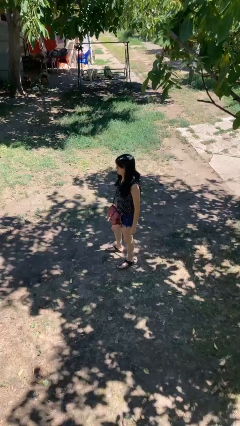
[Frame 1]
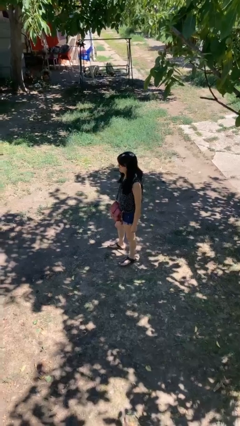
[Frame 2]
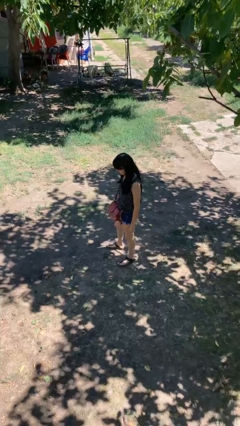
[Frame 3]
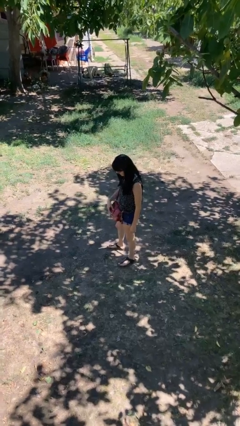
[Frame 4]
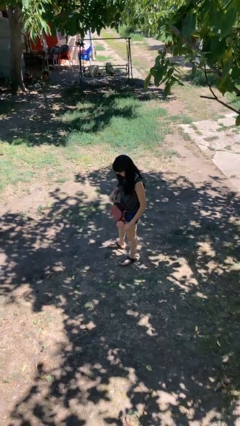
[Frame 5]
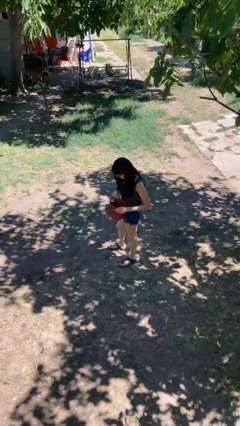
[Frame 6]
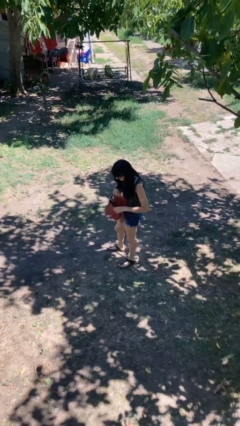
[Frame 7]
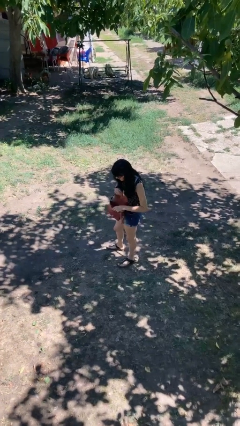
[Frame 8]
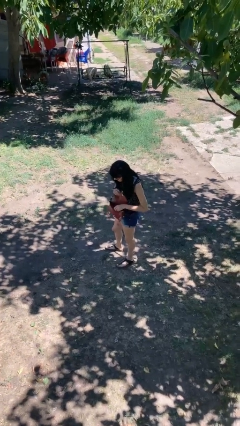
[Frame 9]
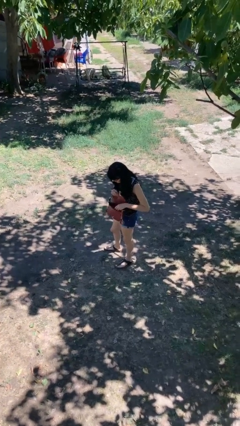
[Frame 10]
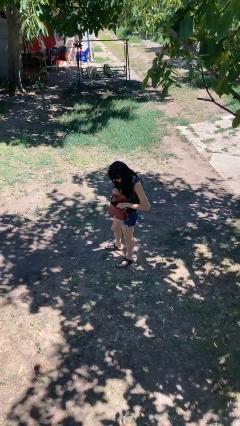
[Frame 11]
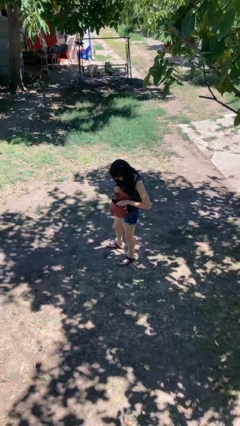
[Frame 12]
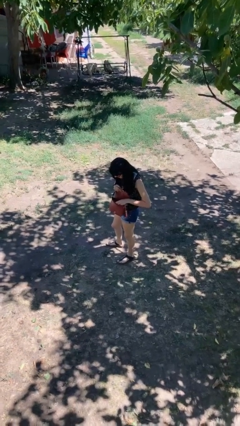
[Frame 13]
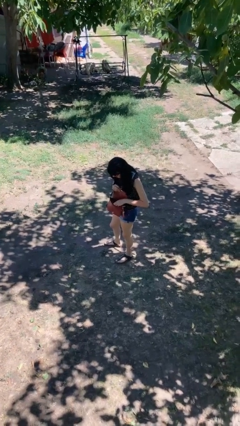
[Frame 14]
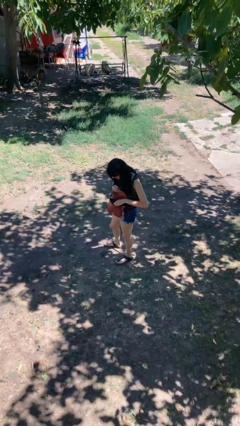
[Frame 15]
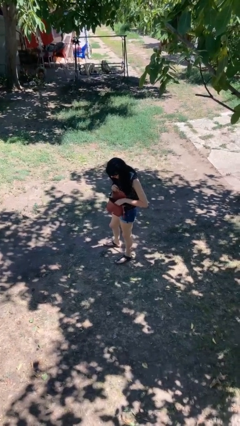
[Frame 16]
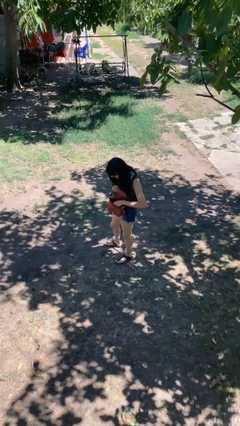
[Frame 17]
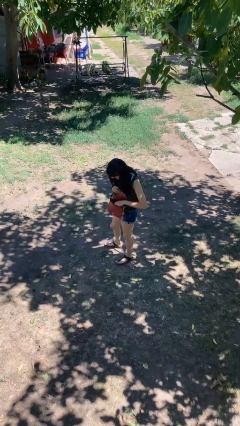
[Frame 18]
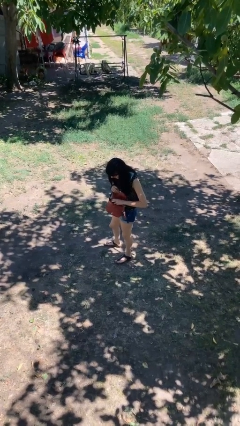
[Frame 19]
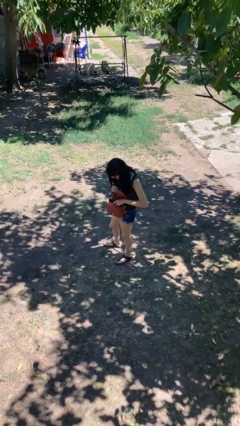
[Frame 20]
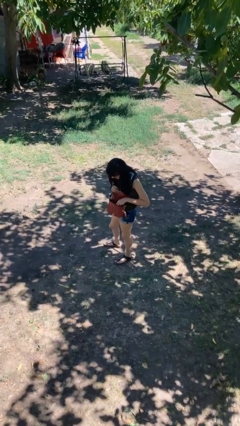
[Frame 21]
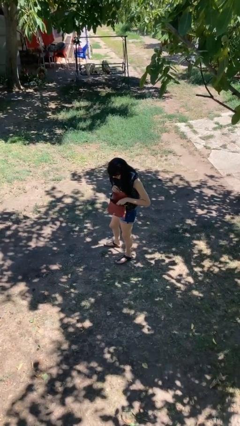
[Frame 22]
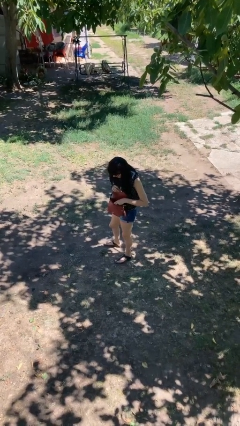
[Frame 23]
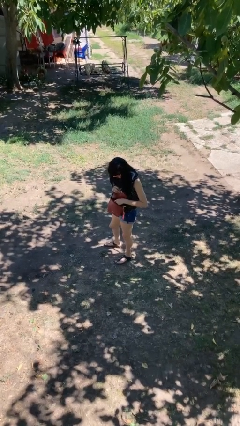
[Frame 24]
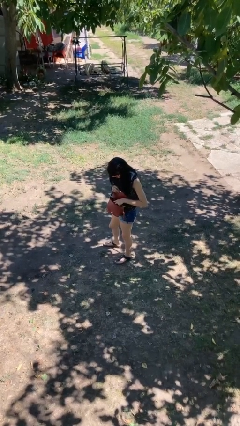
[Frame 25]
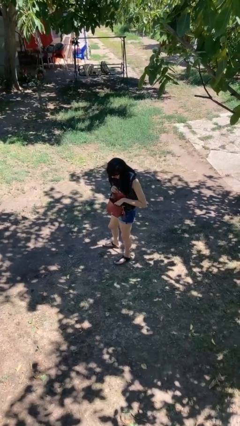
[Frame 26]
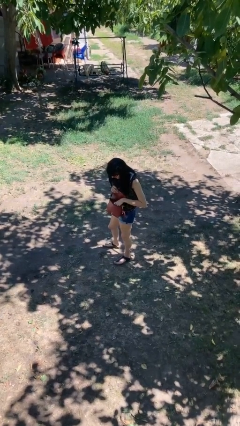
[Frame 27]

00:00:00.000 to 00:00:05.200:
person searches in purse

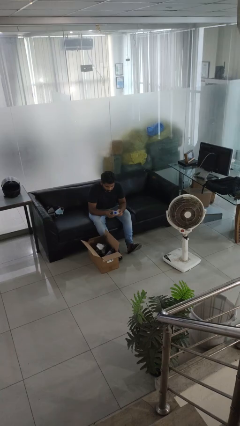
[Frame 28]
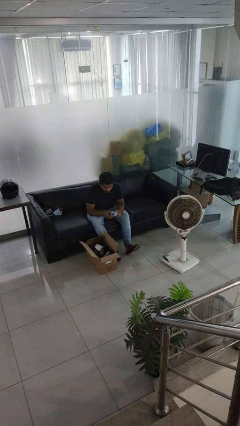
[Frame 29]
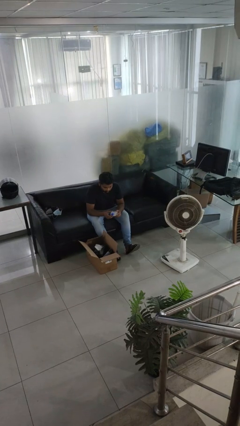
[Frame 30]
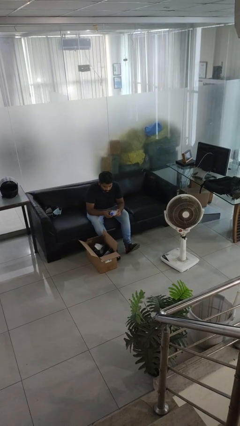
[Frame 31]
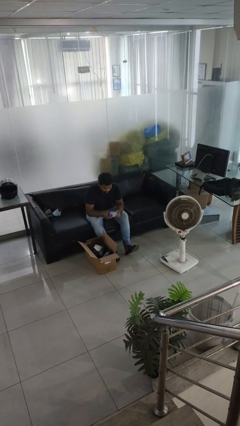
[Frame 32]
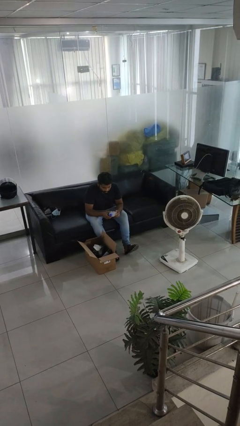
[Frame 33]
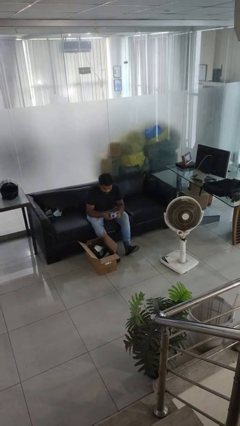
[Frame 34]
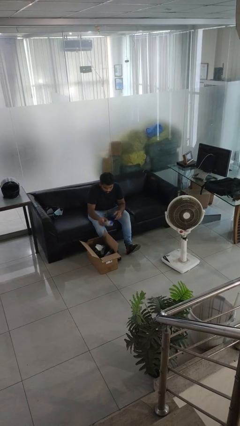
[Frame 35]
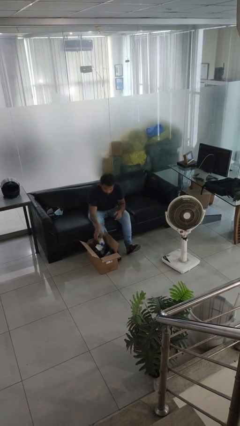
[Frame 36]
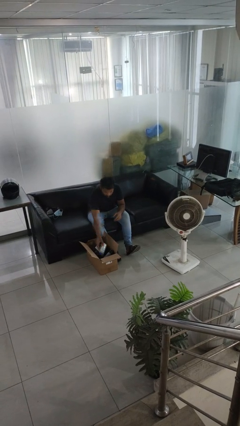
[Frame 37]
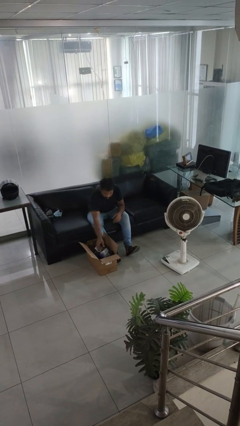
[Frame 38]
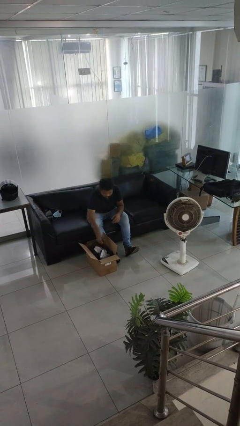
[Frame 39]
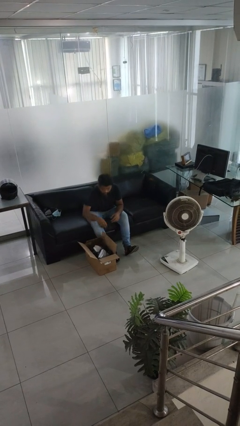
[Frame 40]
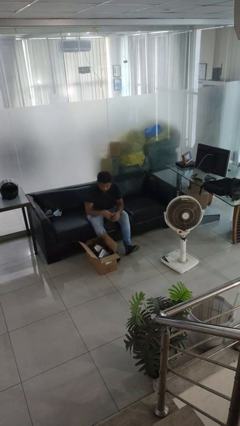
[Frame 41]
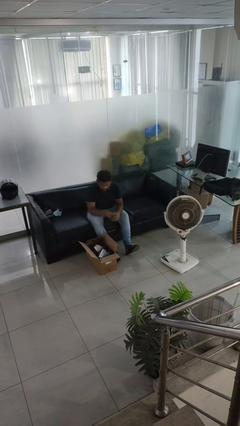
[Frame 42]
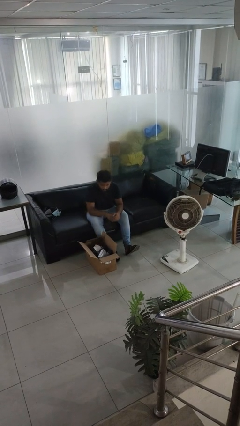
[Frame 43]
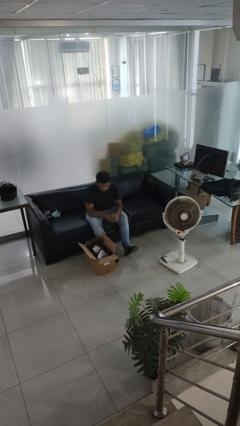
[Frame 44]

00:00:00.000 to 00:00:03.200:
person puts object into box

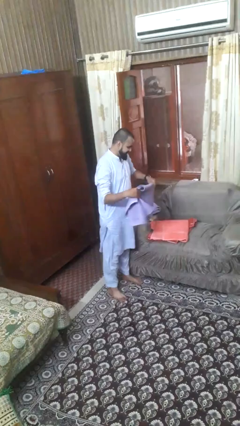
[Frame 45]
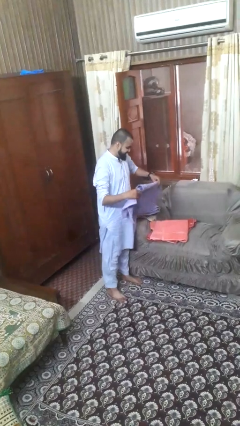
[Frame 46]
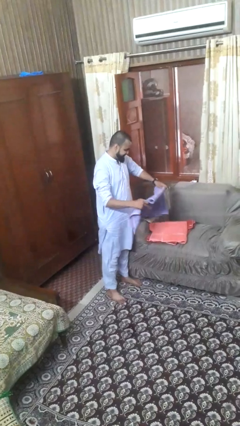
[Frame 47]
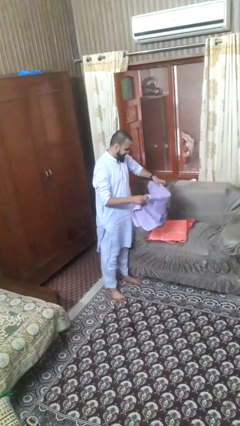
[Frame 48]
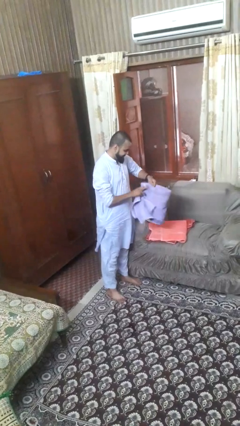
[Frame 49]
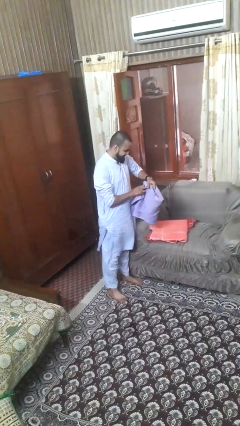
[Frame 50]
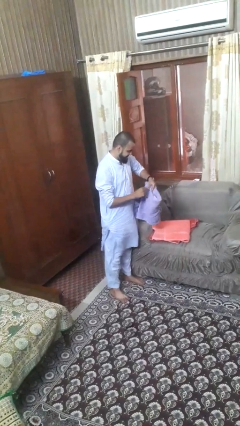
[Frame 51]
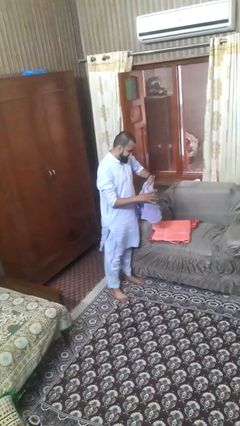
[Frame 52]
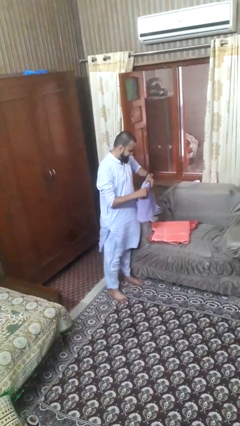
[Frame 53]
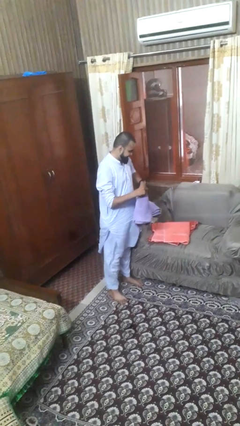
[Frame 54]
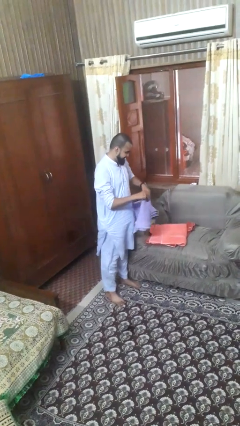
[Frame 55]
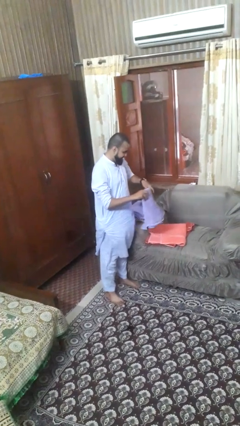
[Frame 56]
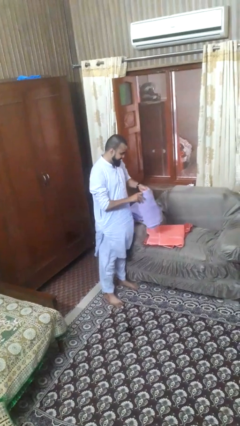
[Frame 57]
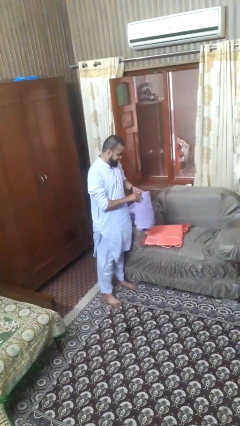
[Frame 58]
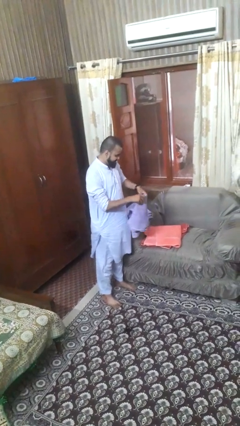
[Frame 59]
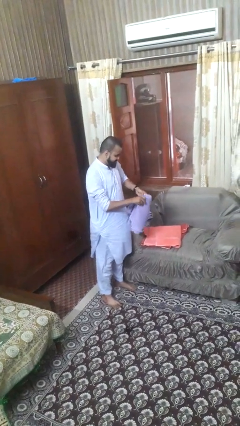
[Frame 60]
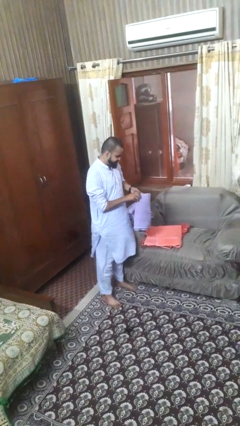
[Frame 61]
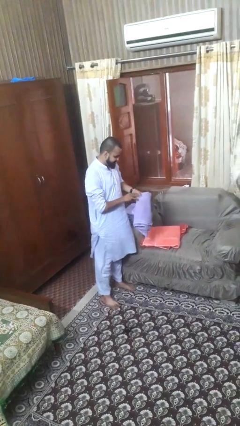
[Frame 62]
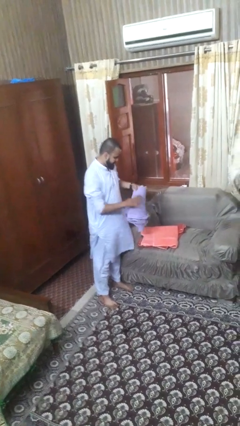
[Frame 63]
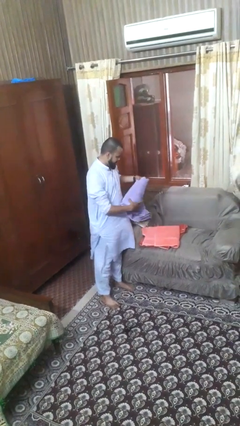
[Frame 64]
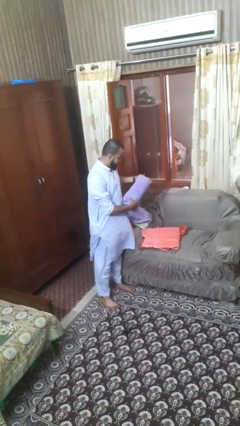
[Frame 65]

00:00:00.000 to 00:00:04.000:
person folds towel

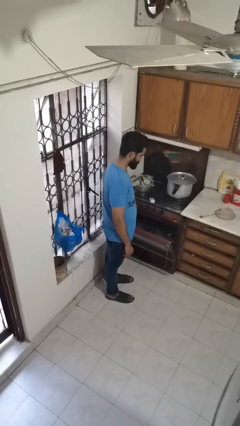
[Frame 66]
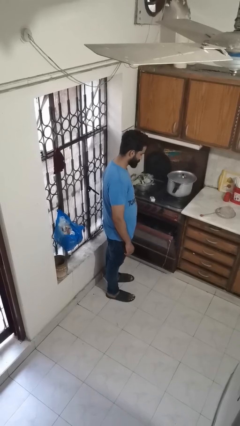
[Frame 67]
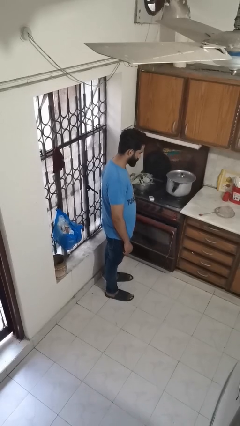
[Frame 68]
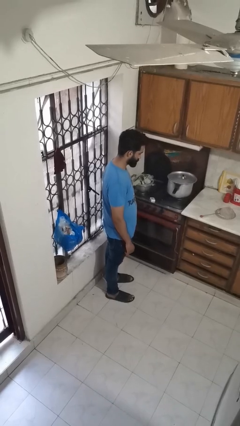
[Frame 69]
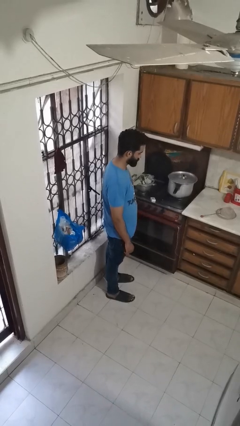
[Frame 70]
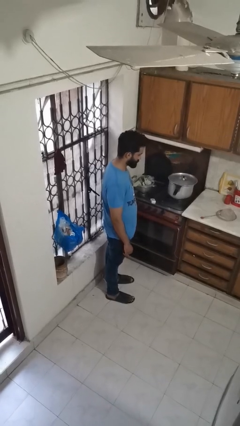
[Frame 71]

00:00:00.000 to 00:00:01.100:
person closes oven door

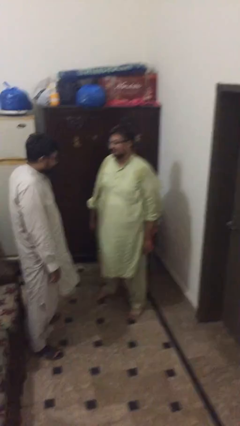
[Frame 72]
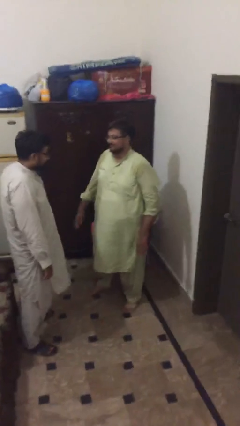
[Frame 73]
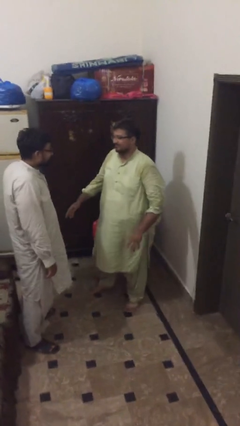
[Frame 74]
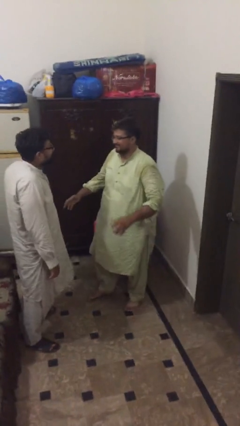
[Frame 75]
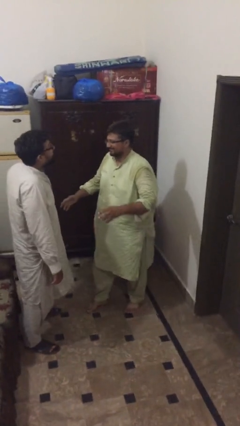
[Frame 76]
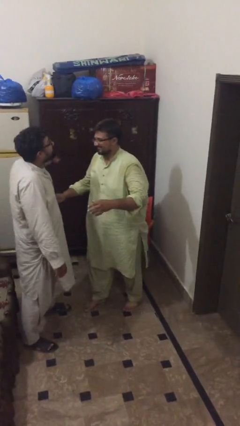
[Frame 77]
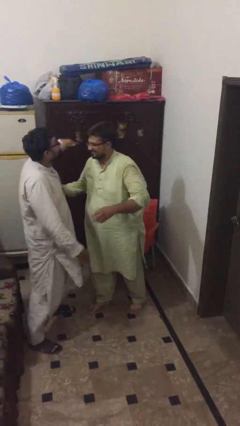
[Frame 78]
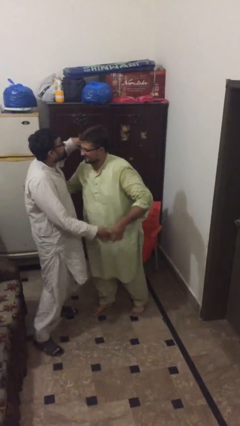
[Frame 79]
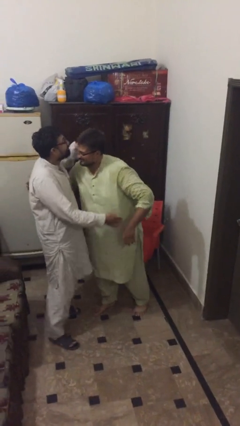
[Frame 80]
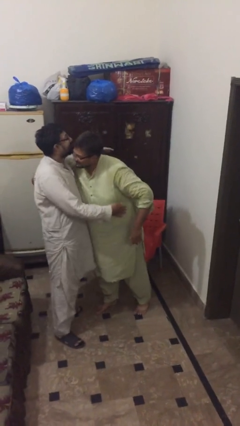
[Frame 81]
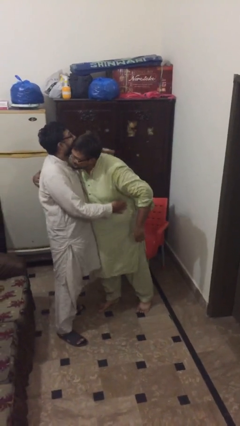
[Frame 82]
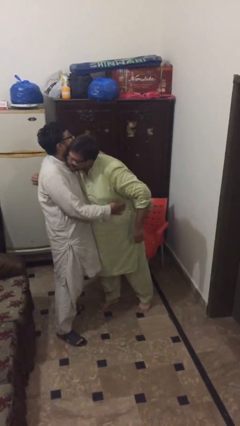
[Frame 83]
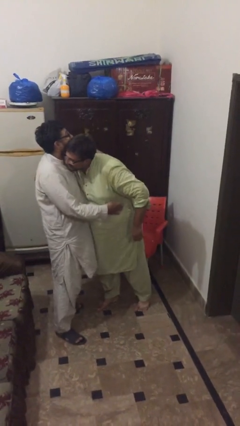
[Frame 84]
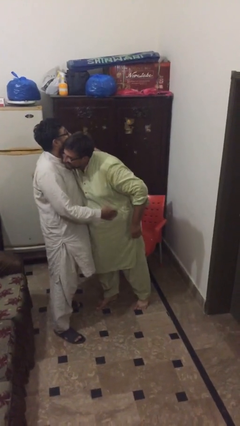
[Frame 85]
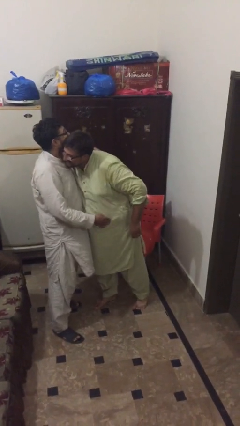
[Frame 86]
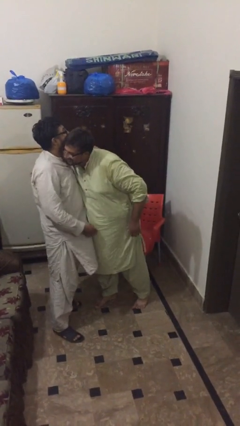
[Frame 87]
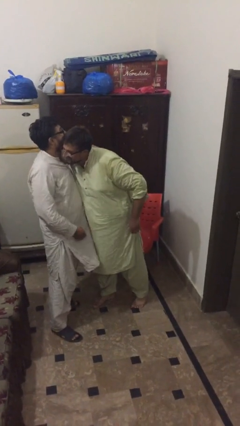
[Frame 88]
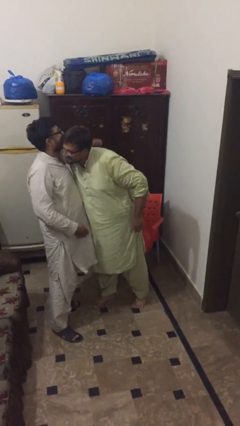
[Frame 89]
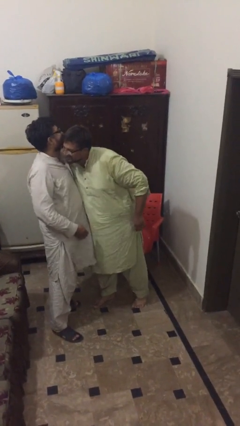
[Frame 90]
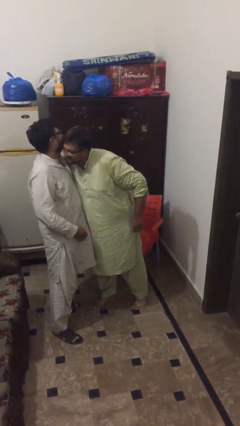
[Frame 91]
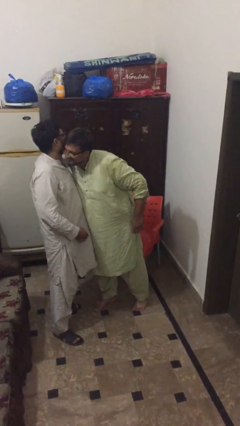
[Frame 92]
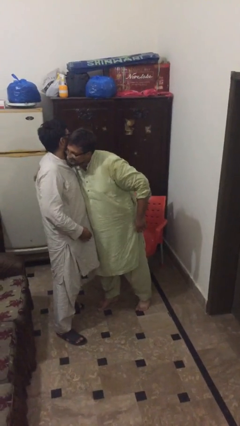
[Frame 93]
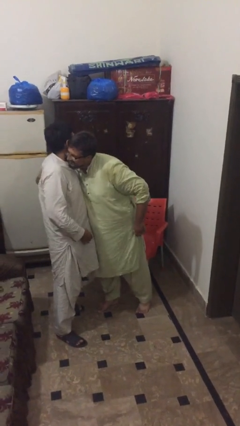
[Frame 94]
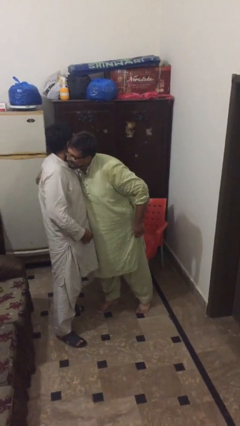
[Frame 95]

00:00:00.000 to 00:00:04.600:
person embraces person
